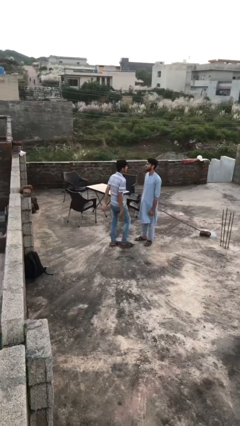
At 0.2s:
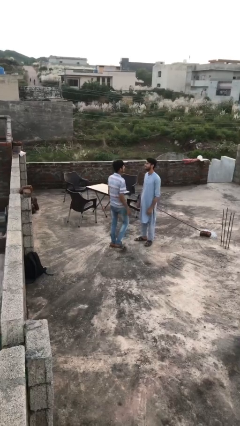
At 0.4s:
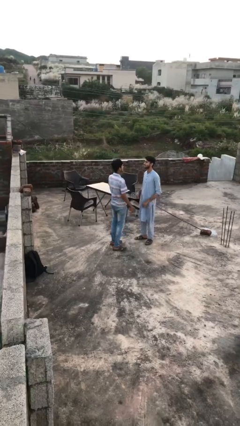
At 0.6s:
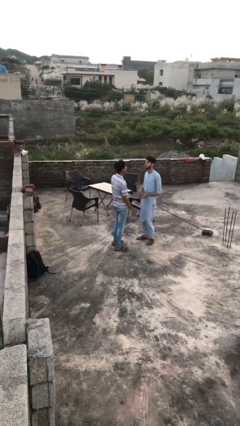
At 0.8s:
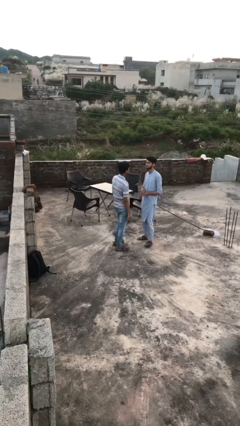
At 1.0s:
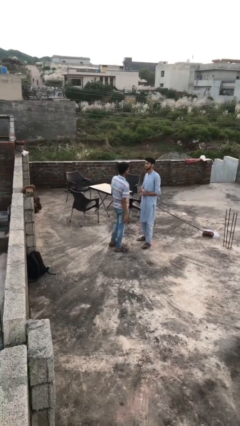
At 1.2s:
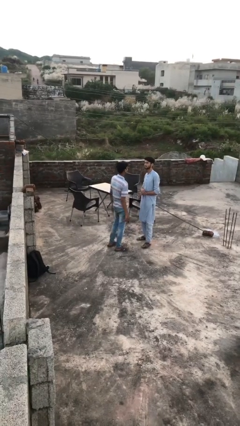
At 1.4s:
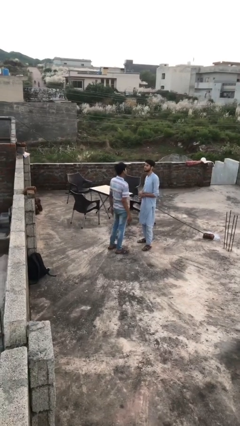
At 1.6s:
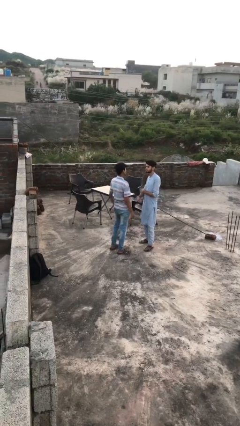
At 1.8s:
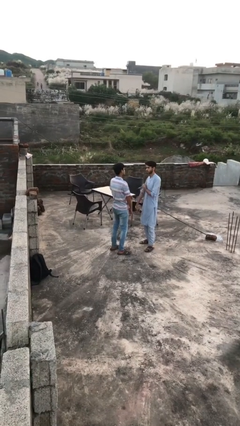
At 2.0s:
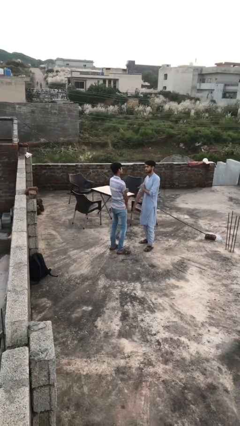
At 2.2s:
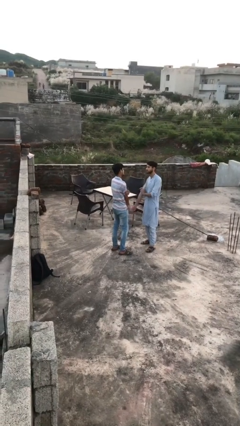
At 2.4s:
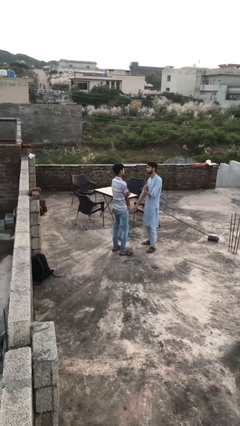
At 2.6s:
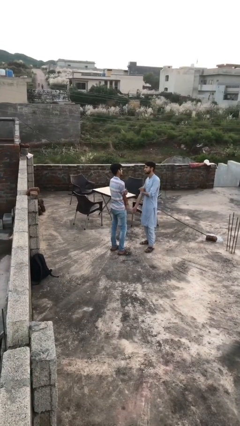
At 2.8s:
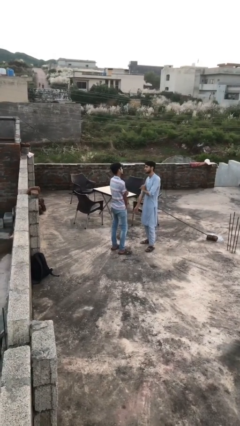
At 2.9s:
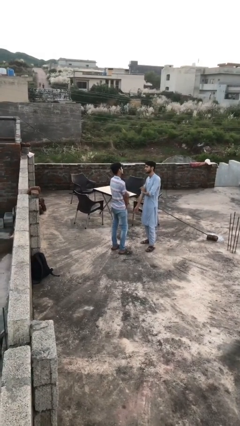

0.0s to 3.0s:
person talks to person

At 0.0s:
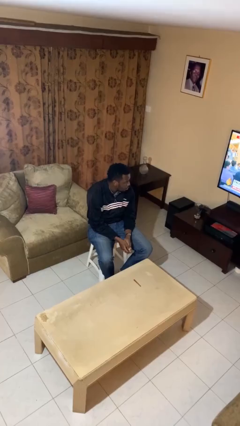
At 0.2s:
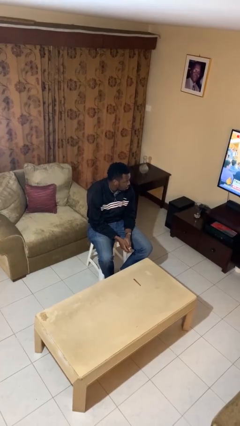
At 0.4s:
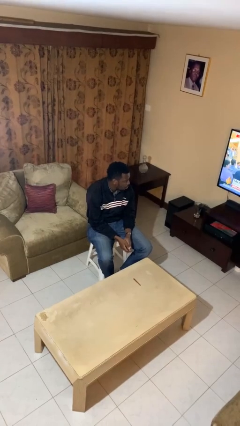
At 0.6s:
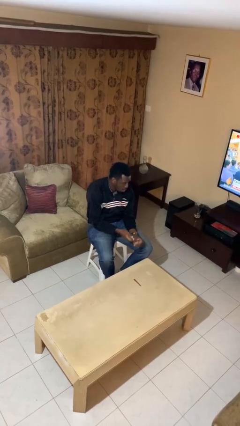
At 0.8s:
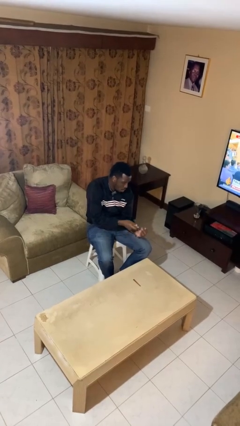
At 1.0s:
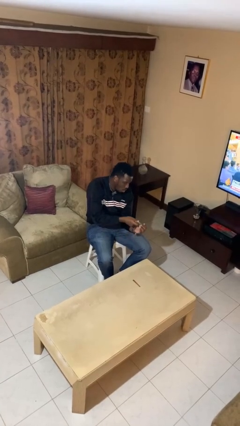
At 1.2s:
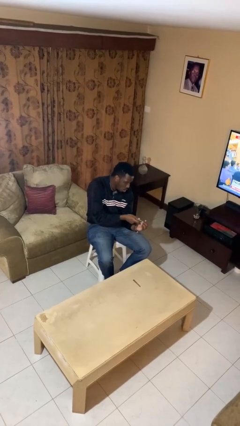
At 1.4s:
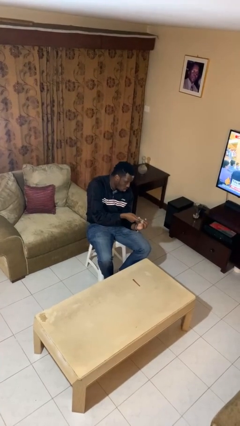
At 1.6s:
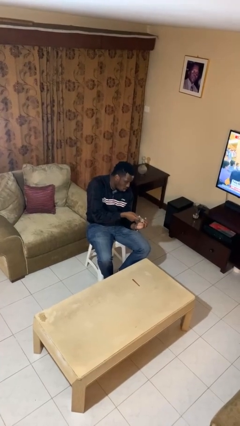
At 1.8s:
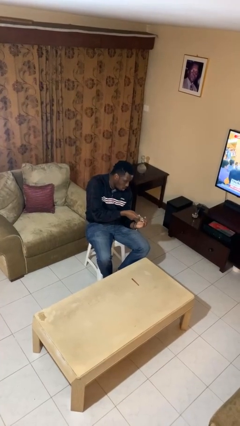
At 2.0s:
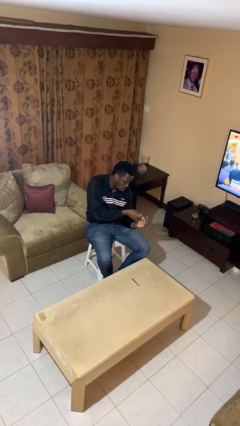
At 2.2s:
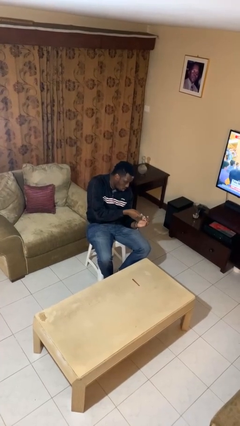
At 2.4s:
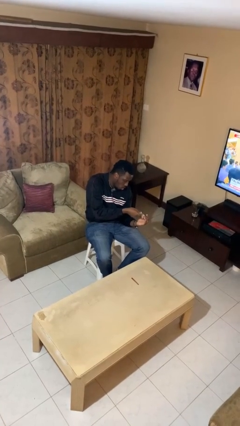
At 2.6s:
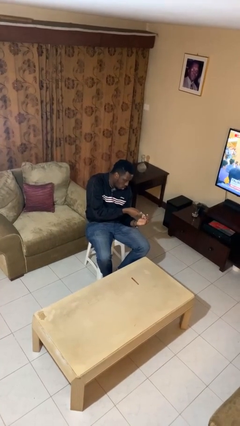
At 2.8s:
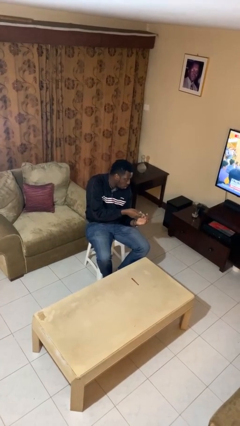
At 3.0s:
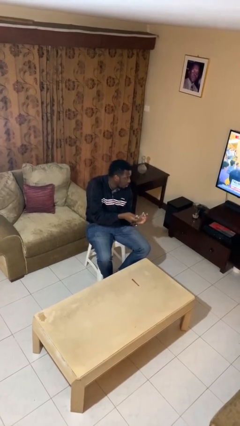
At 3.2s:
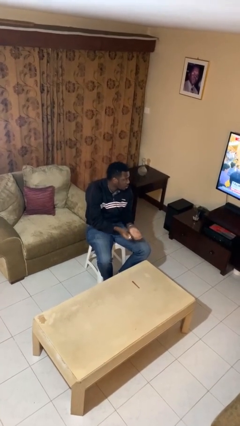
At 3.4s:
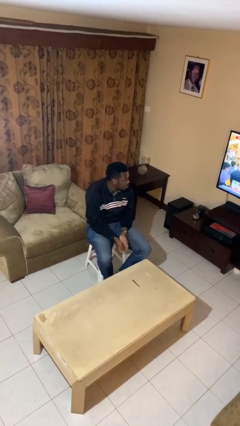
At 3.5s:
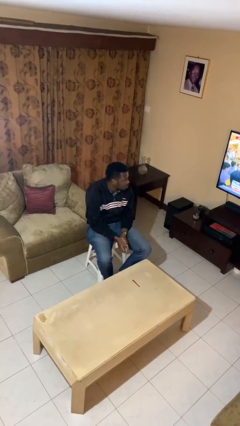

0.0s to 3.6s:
person clips fingernails

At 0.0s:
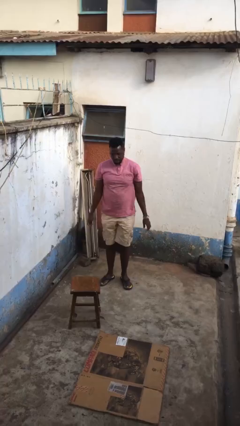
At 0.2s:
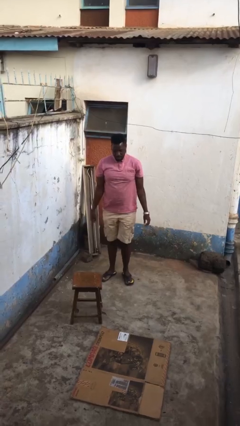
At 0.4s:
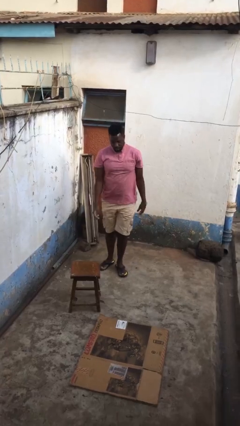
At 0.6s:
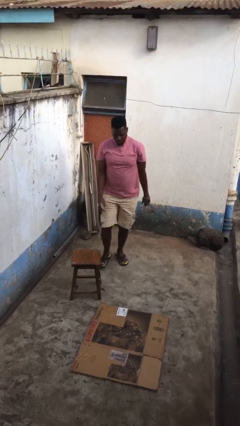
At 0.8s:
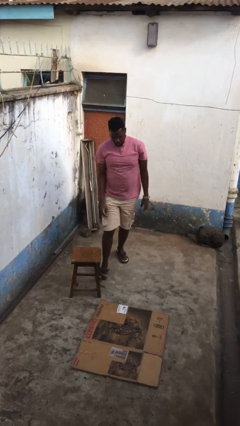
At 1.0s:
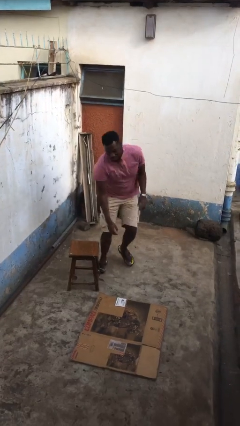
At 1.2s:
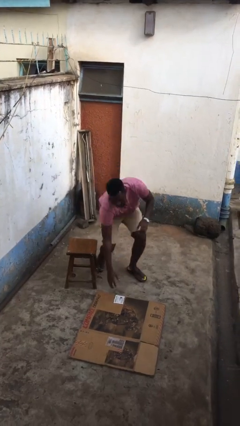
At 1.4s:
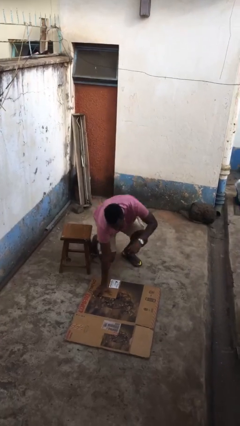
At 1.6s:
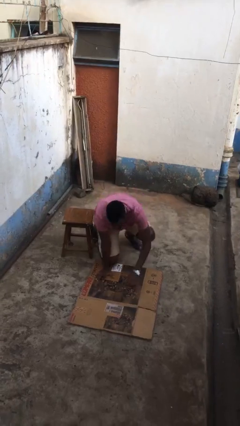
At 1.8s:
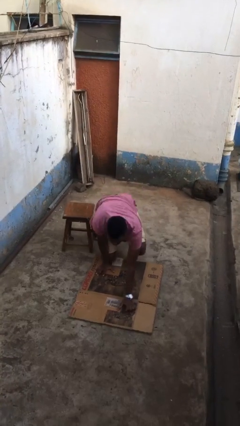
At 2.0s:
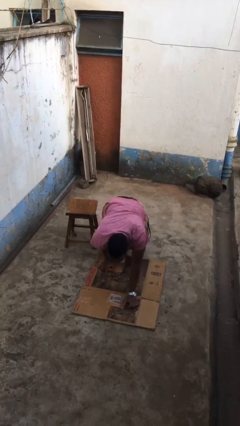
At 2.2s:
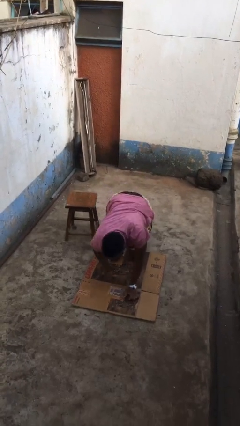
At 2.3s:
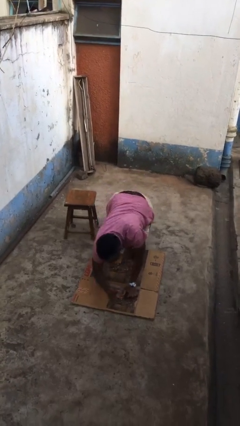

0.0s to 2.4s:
person trips on object on floor

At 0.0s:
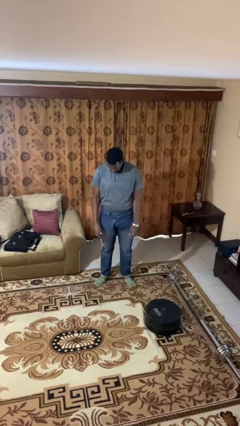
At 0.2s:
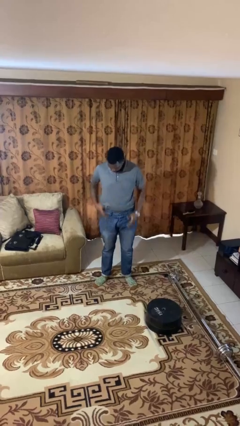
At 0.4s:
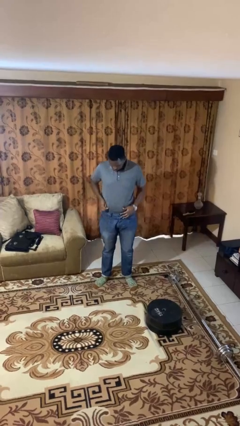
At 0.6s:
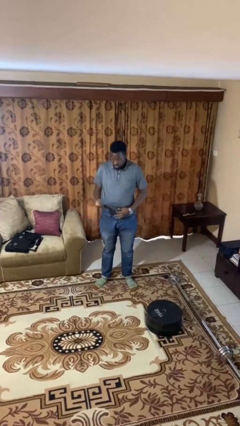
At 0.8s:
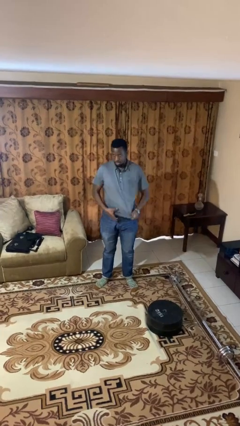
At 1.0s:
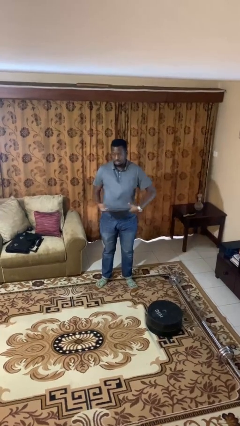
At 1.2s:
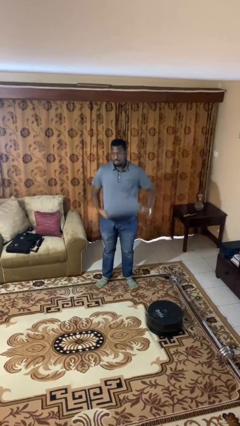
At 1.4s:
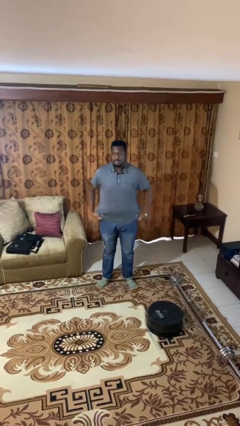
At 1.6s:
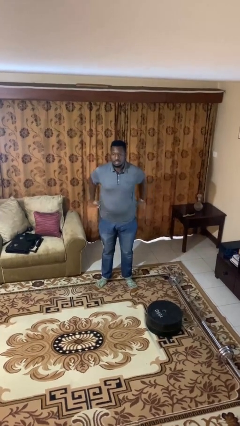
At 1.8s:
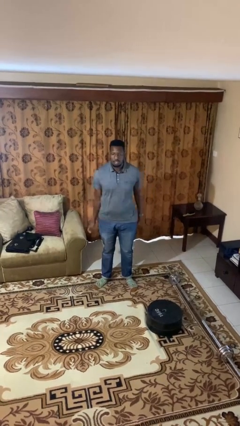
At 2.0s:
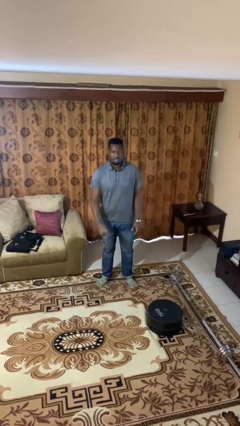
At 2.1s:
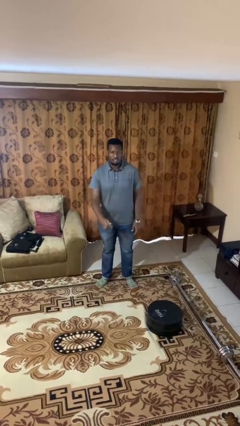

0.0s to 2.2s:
person untucks shirt

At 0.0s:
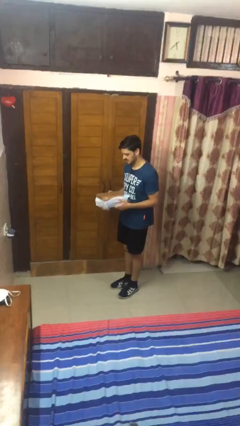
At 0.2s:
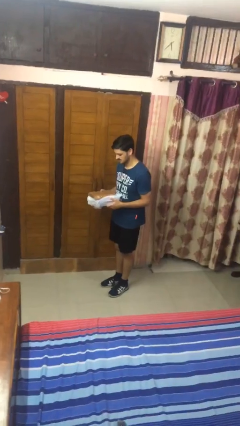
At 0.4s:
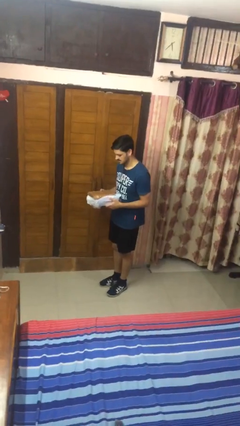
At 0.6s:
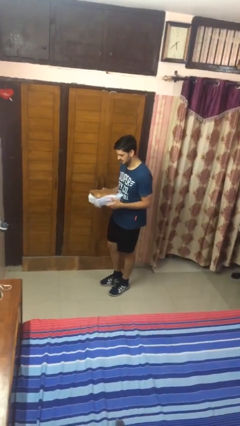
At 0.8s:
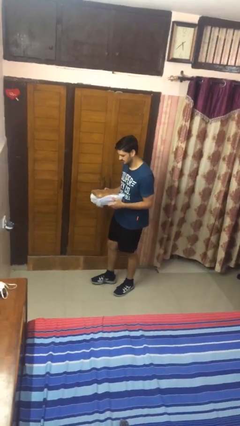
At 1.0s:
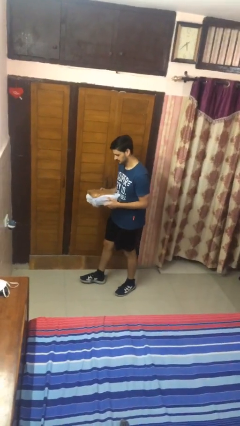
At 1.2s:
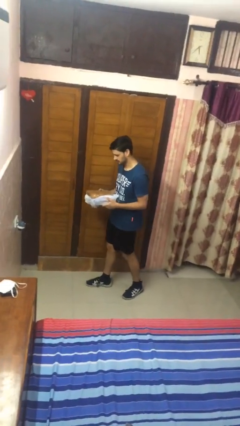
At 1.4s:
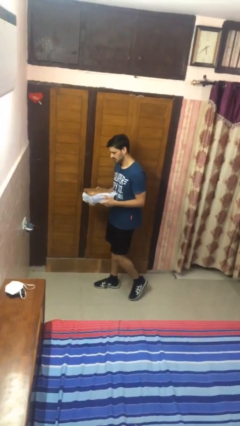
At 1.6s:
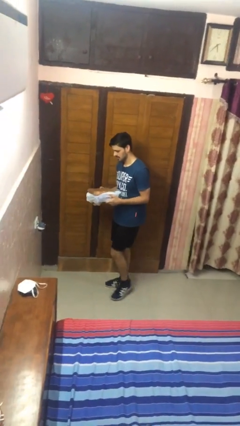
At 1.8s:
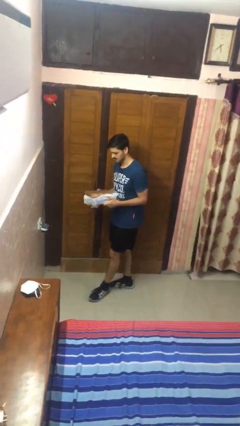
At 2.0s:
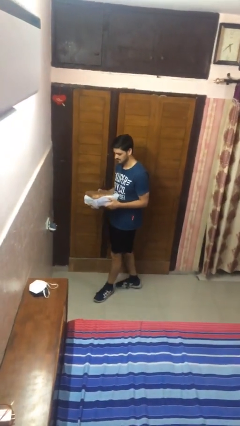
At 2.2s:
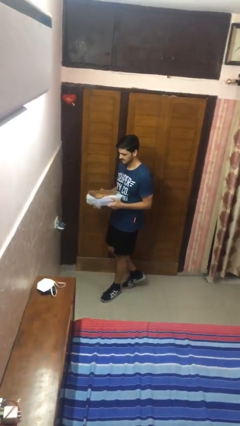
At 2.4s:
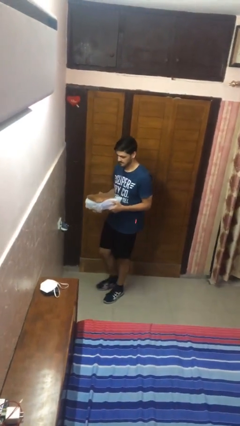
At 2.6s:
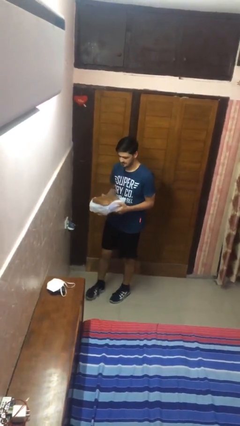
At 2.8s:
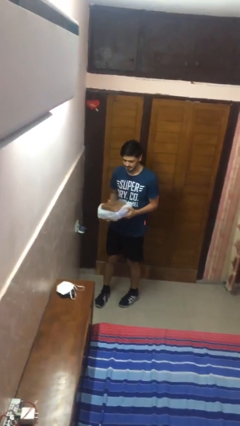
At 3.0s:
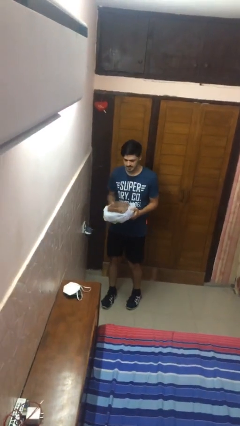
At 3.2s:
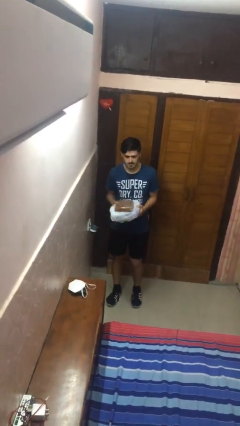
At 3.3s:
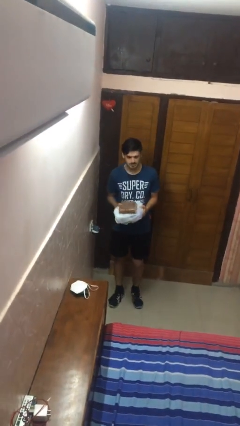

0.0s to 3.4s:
person carries groceries

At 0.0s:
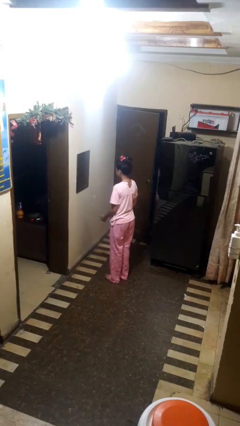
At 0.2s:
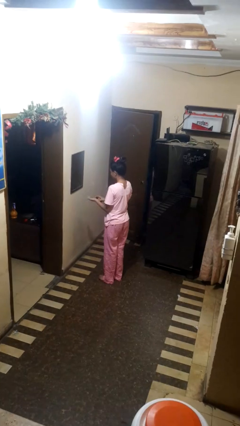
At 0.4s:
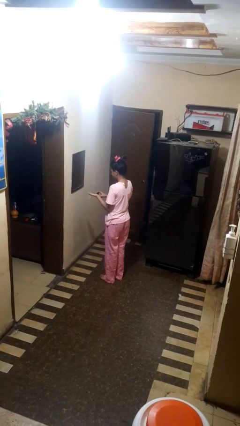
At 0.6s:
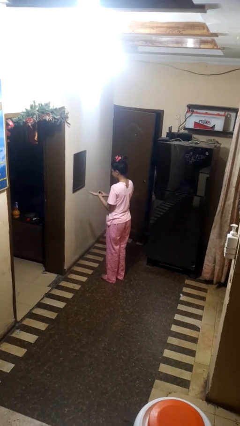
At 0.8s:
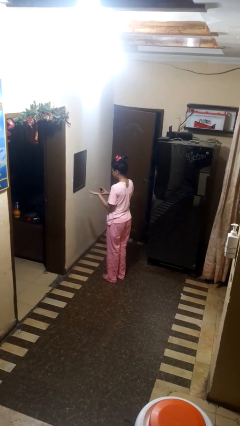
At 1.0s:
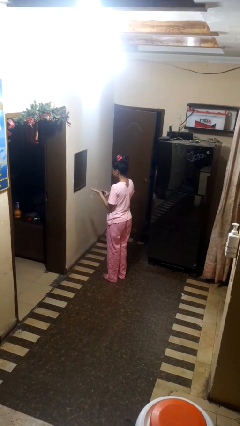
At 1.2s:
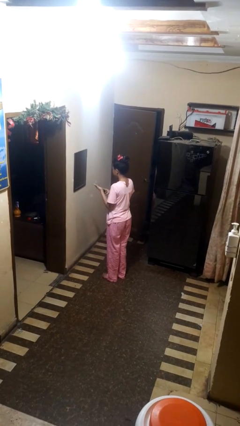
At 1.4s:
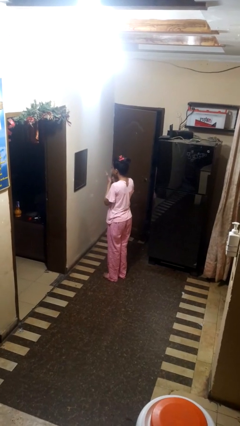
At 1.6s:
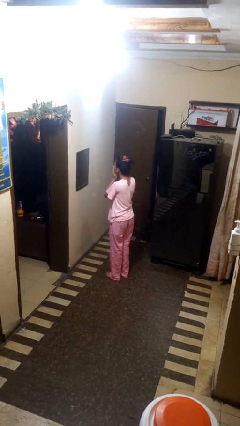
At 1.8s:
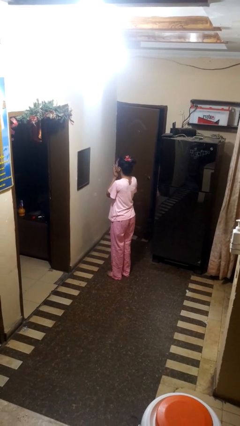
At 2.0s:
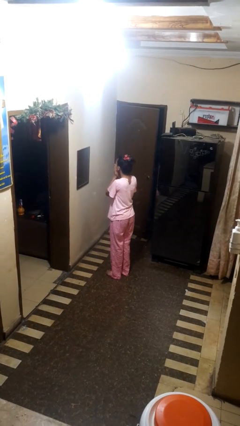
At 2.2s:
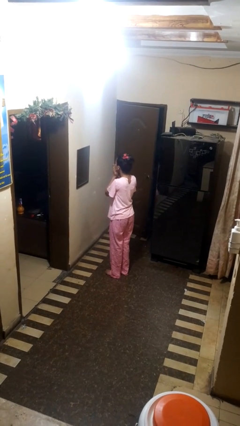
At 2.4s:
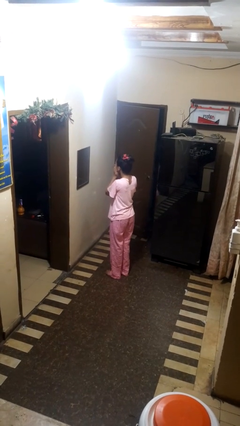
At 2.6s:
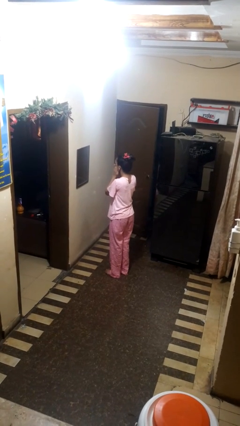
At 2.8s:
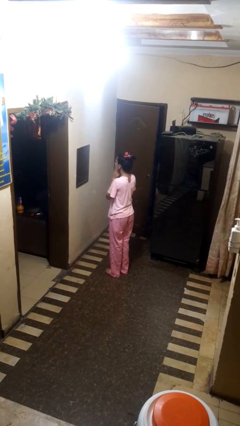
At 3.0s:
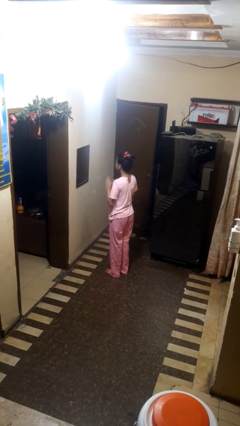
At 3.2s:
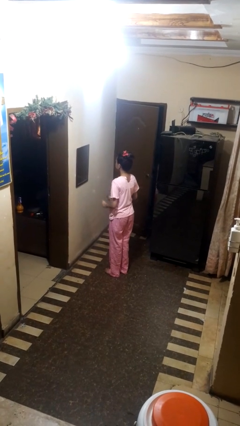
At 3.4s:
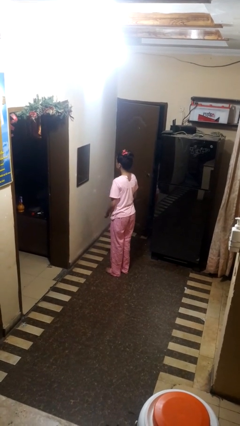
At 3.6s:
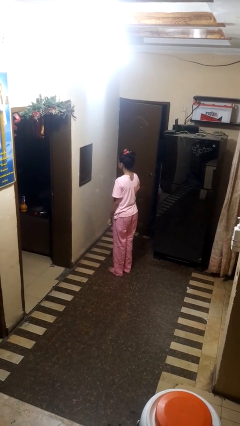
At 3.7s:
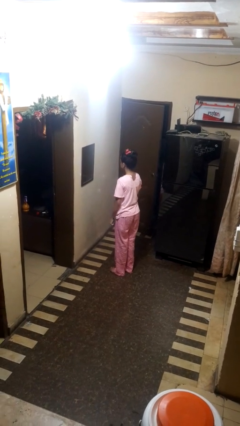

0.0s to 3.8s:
person applies foundation makeup
